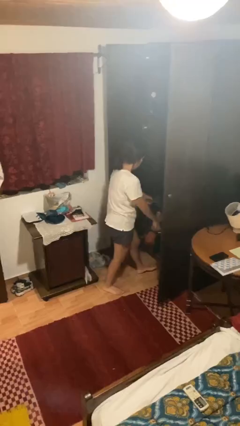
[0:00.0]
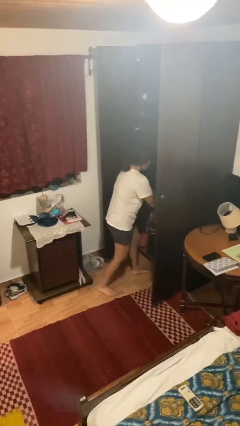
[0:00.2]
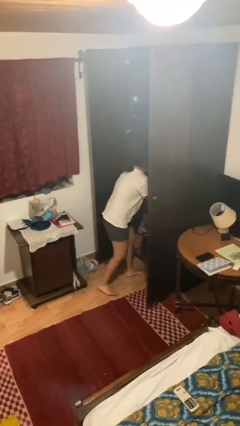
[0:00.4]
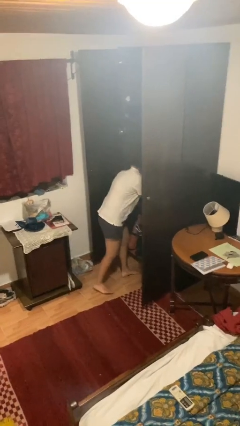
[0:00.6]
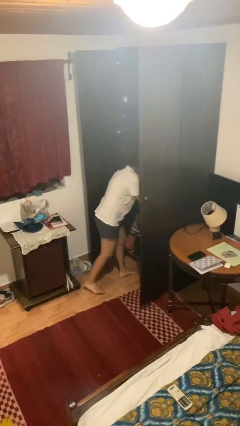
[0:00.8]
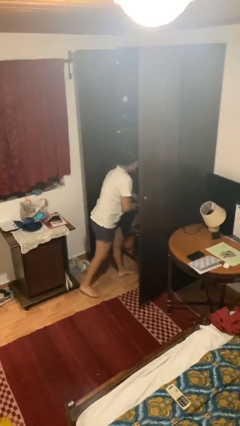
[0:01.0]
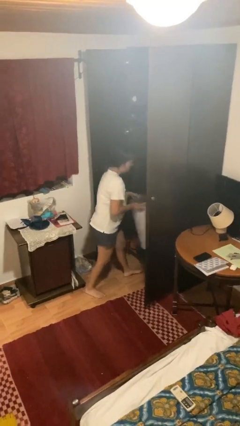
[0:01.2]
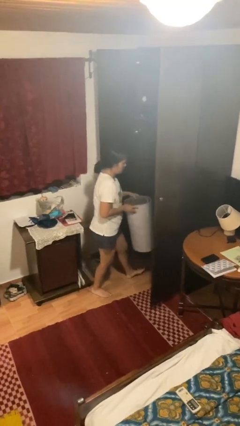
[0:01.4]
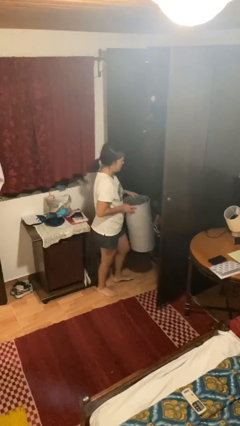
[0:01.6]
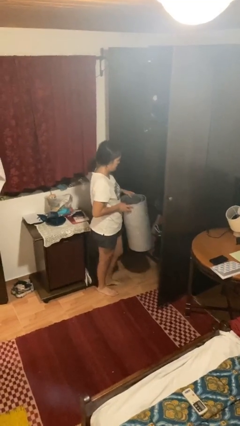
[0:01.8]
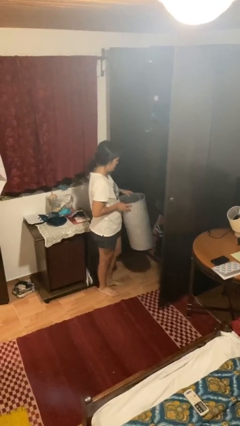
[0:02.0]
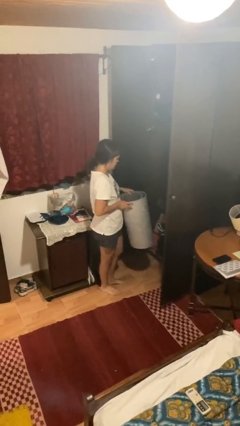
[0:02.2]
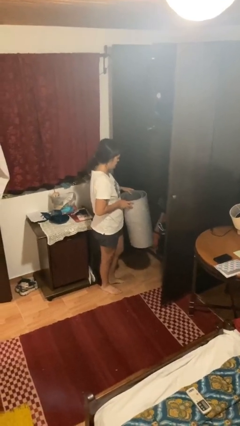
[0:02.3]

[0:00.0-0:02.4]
person picks up object from cabinet

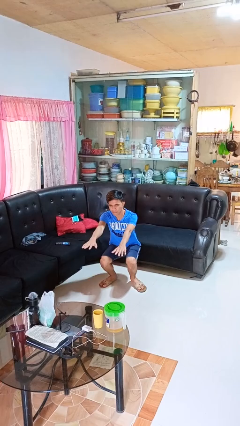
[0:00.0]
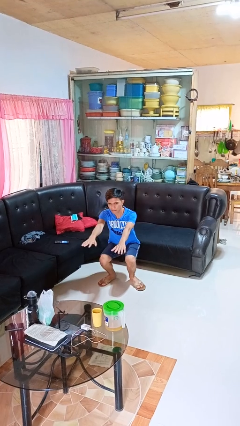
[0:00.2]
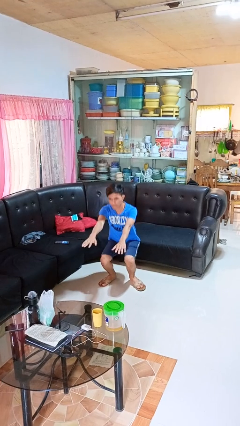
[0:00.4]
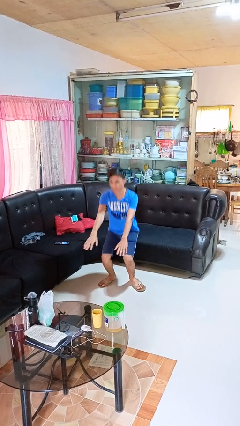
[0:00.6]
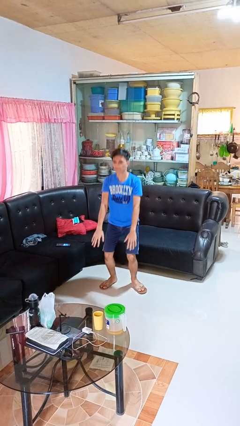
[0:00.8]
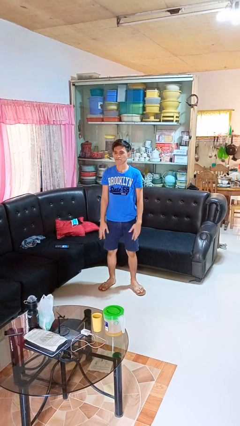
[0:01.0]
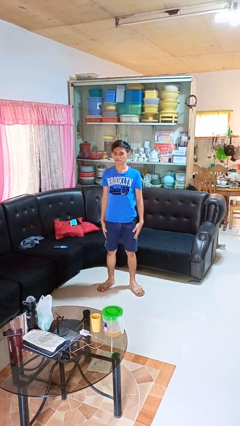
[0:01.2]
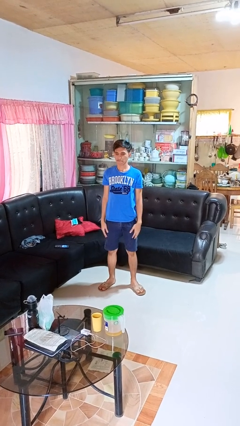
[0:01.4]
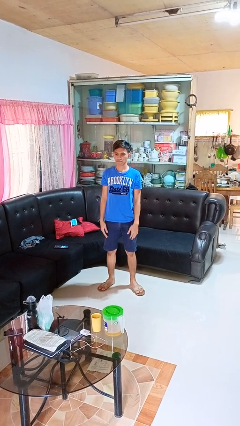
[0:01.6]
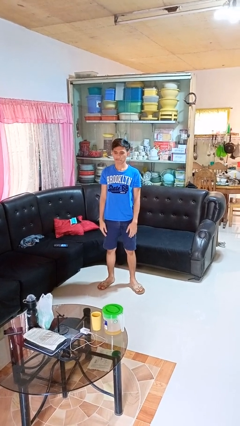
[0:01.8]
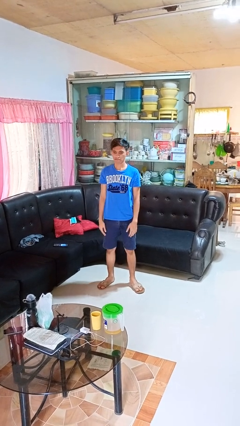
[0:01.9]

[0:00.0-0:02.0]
person stands up

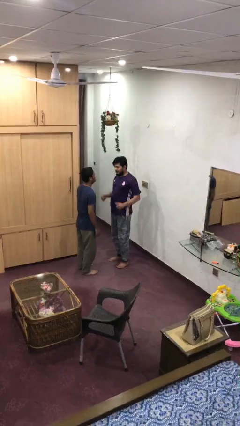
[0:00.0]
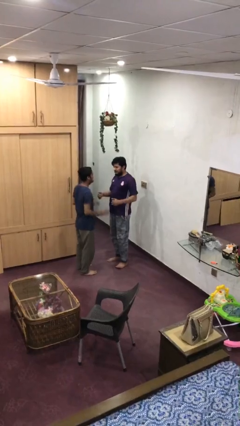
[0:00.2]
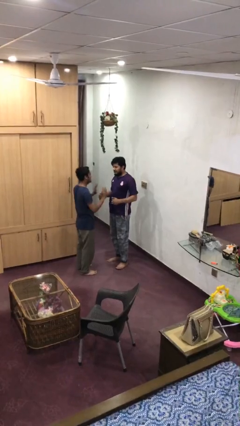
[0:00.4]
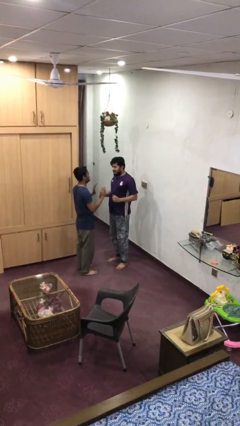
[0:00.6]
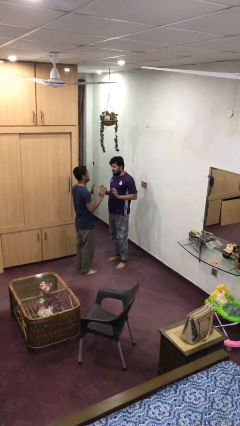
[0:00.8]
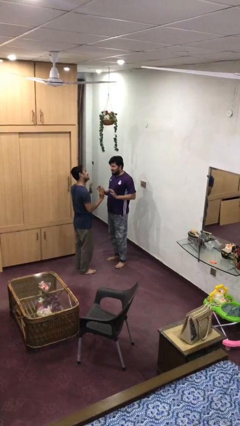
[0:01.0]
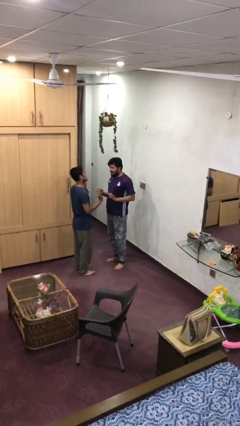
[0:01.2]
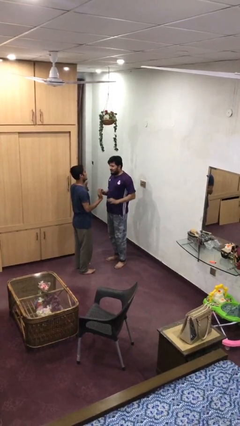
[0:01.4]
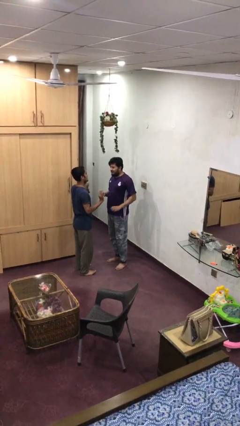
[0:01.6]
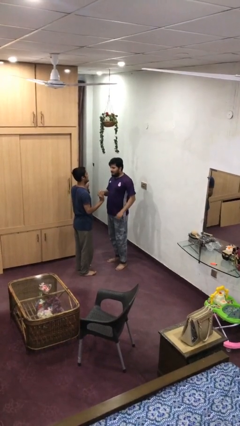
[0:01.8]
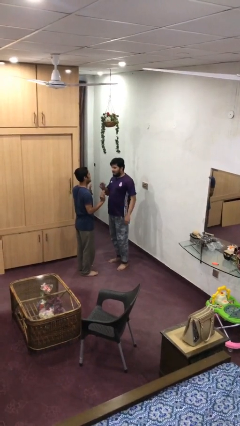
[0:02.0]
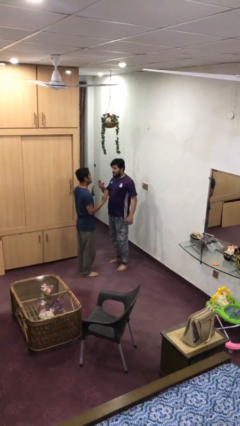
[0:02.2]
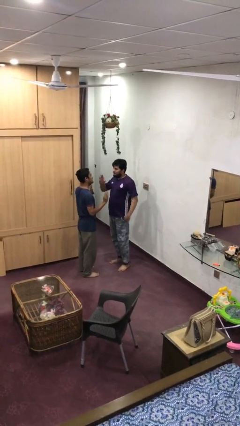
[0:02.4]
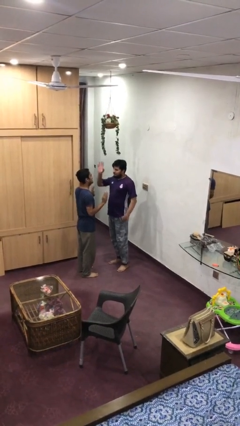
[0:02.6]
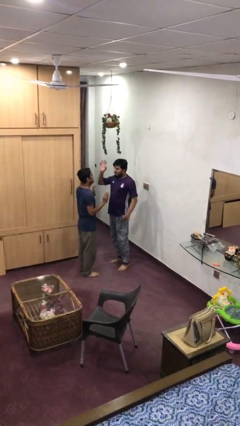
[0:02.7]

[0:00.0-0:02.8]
person talks to person

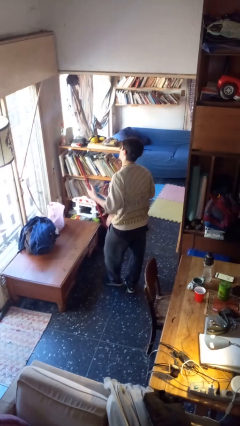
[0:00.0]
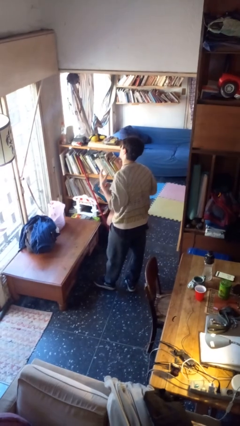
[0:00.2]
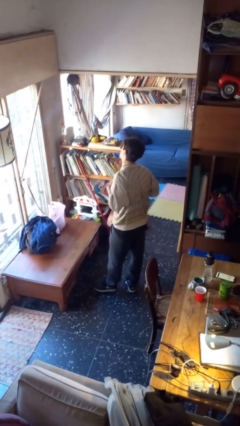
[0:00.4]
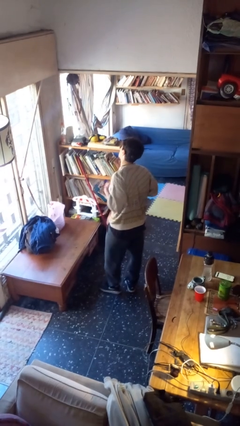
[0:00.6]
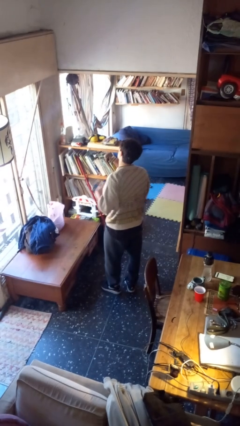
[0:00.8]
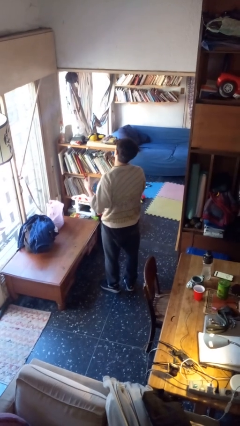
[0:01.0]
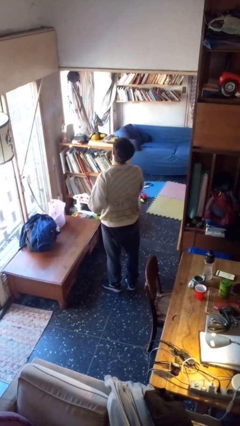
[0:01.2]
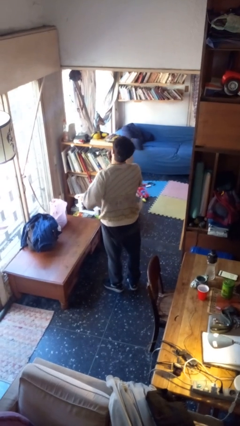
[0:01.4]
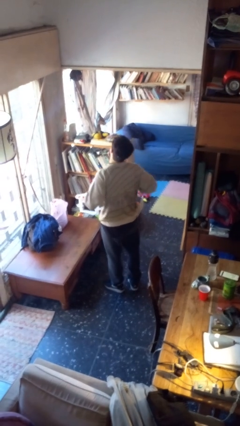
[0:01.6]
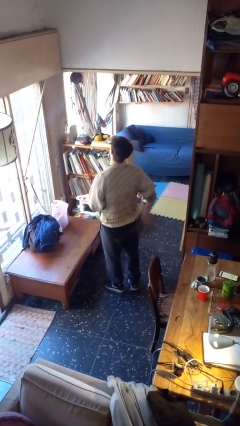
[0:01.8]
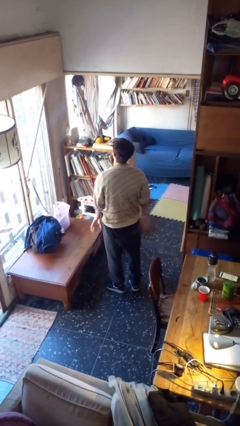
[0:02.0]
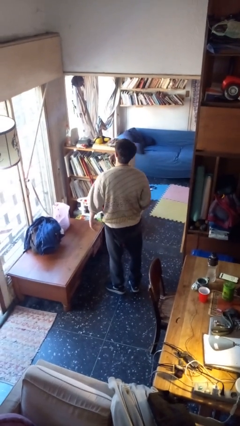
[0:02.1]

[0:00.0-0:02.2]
person drums on chest

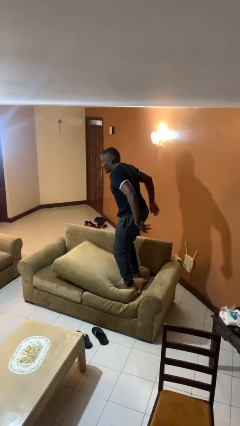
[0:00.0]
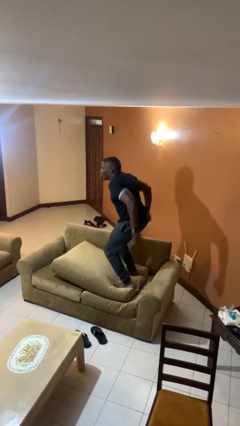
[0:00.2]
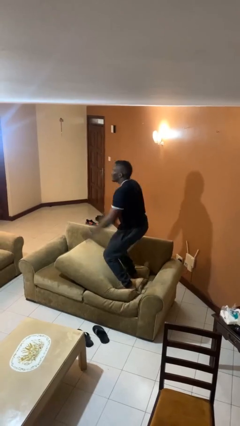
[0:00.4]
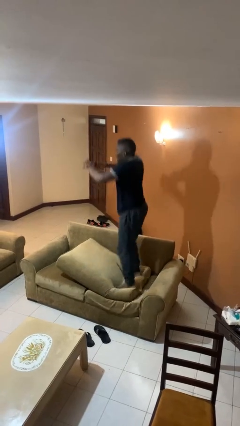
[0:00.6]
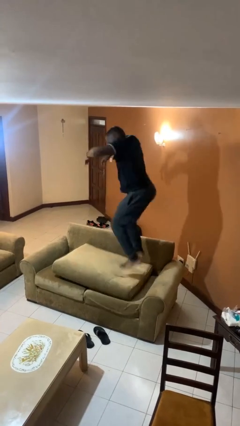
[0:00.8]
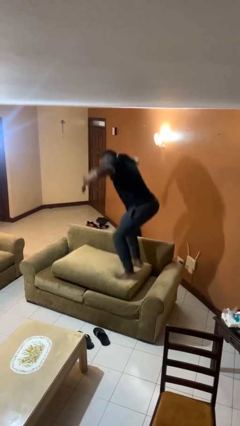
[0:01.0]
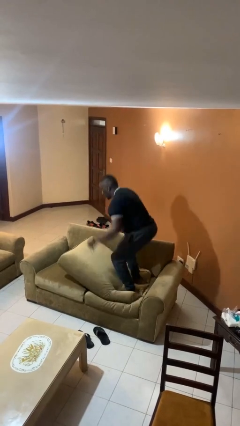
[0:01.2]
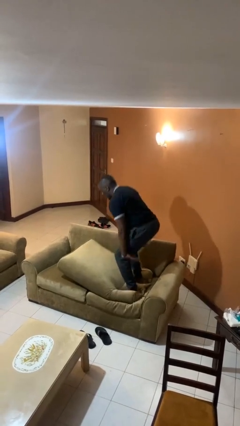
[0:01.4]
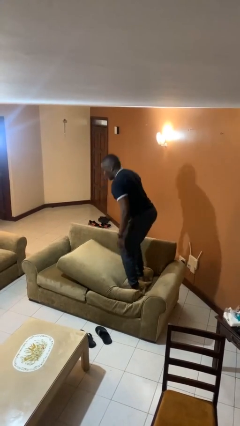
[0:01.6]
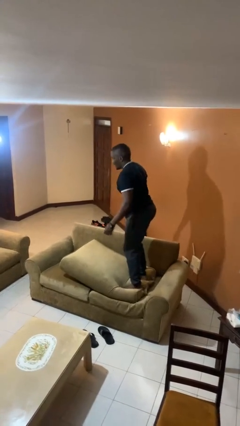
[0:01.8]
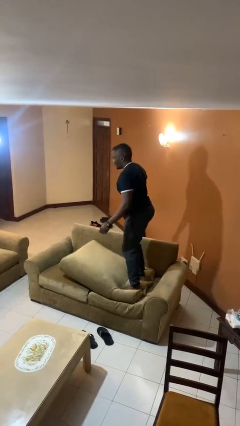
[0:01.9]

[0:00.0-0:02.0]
person jumps on couch

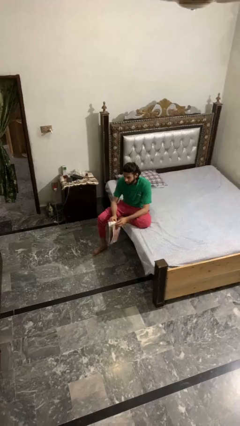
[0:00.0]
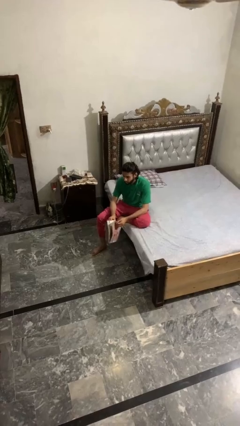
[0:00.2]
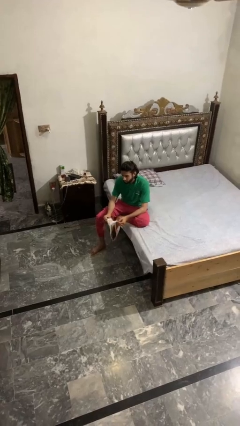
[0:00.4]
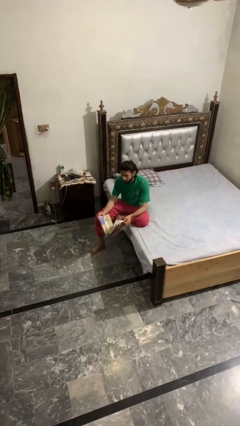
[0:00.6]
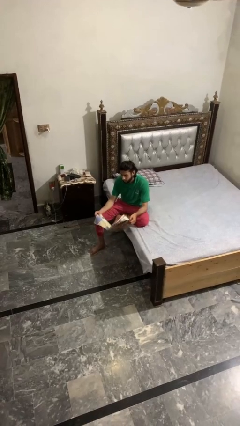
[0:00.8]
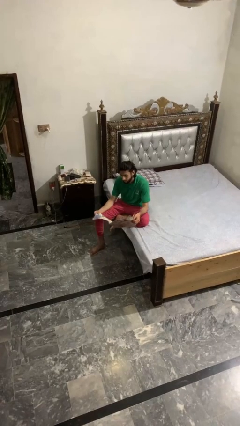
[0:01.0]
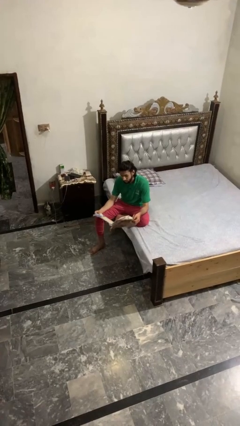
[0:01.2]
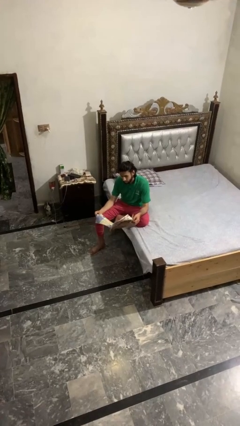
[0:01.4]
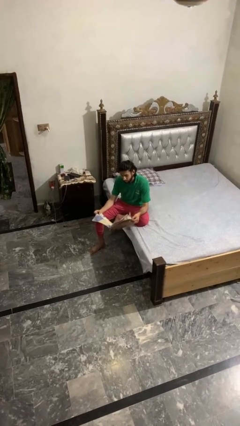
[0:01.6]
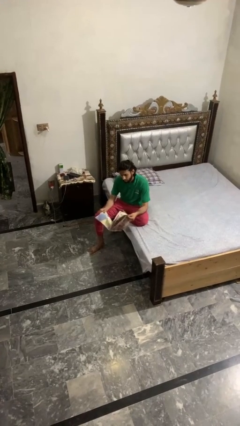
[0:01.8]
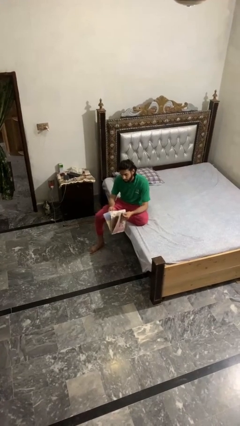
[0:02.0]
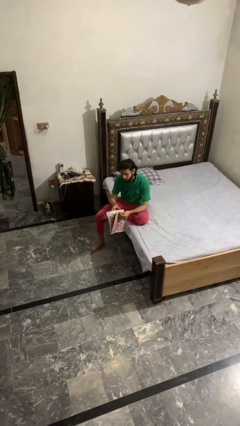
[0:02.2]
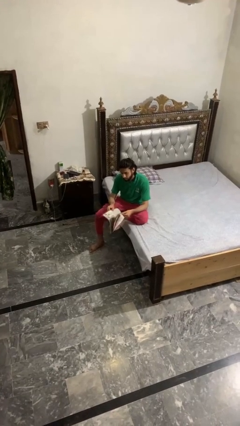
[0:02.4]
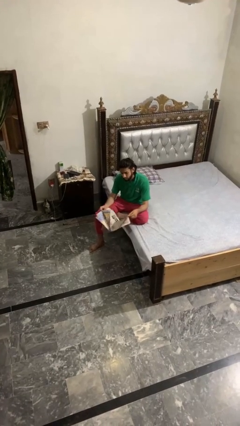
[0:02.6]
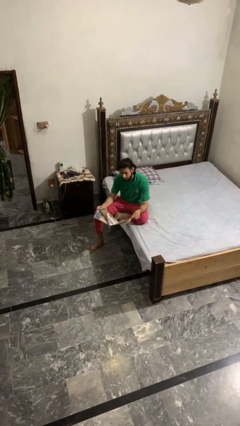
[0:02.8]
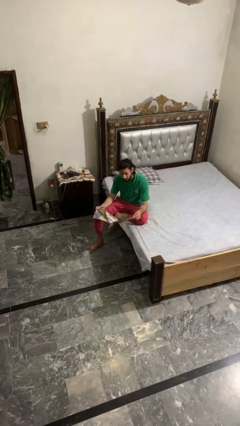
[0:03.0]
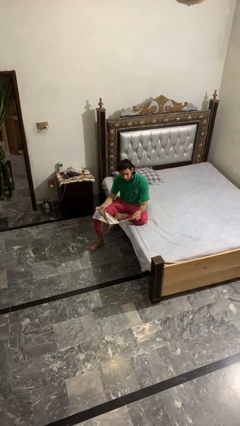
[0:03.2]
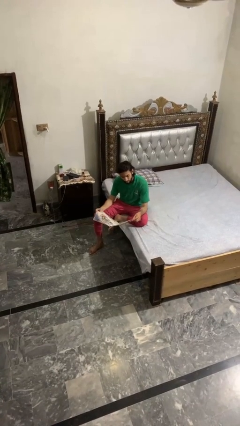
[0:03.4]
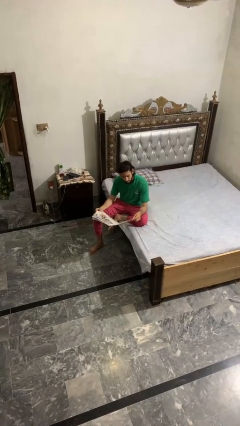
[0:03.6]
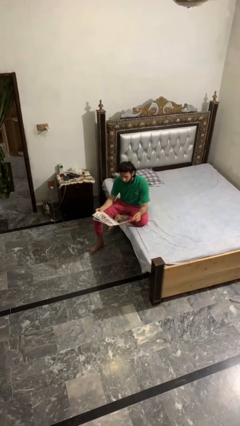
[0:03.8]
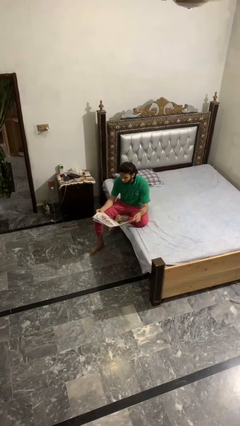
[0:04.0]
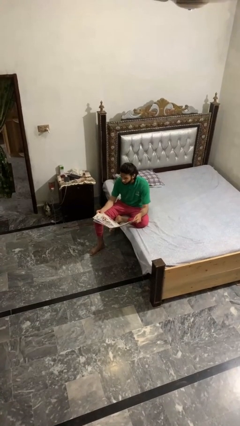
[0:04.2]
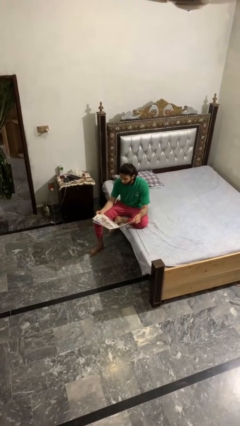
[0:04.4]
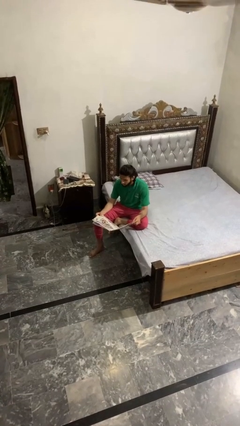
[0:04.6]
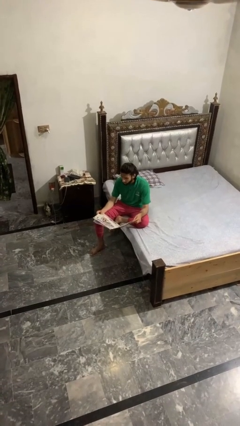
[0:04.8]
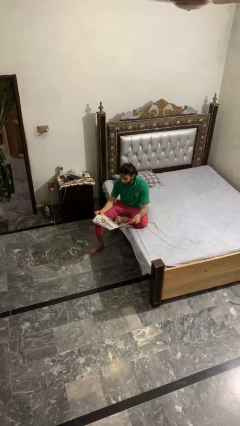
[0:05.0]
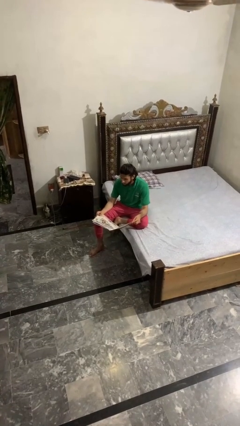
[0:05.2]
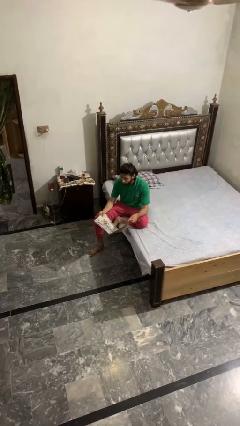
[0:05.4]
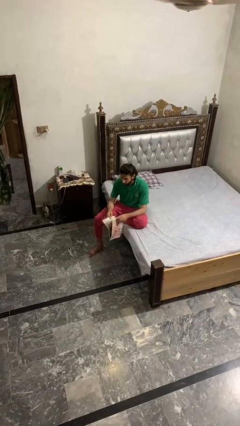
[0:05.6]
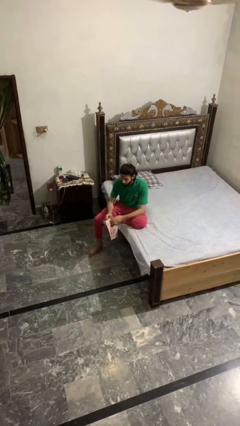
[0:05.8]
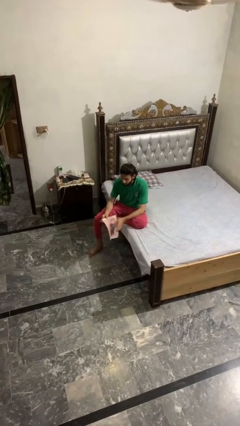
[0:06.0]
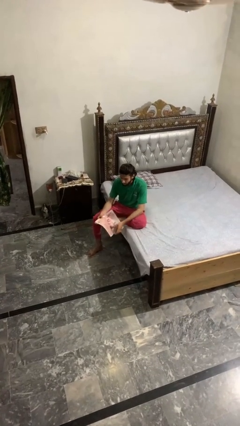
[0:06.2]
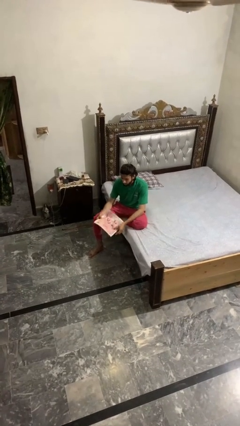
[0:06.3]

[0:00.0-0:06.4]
person reads magazine
